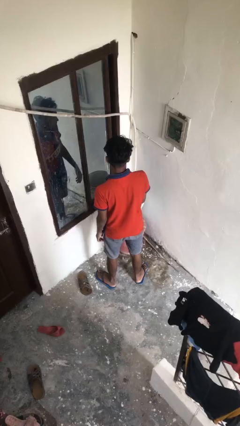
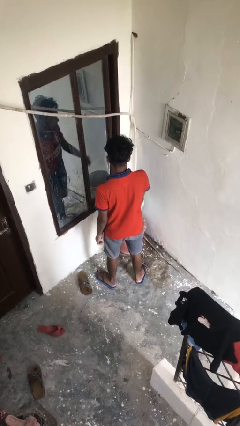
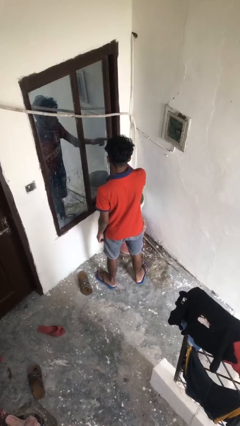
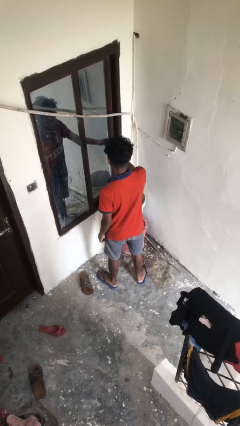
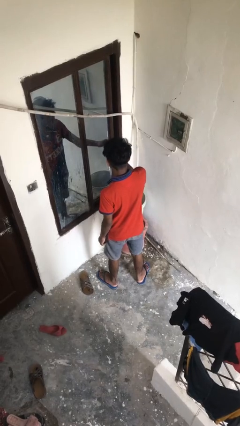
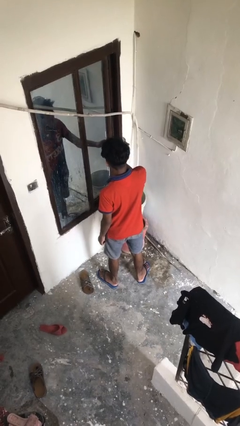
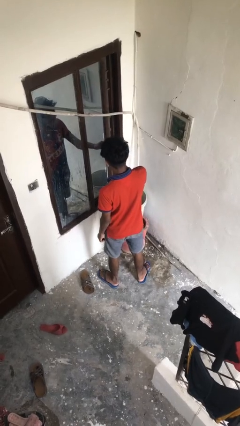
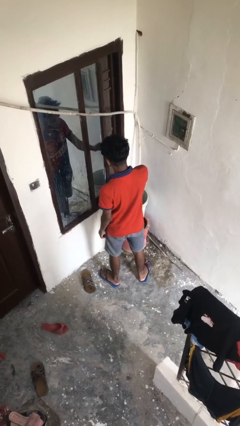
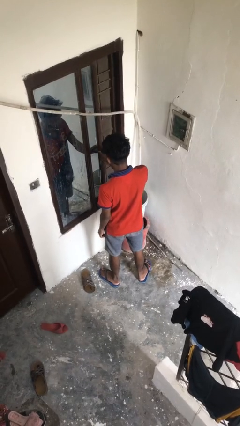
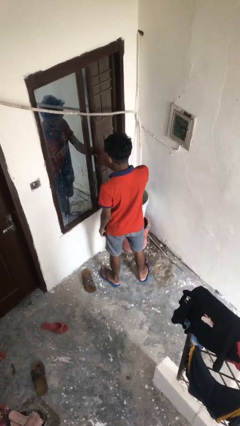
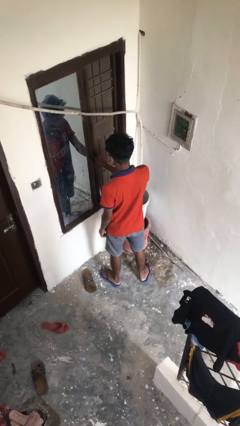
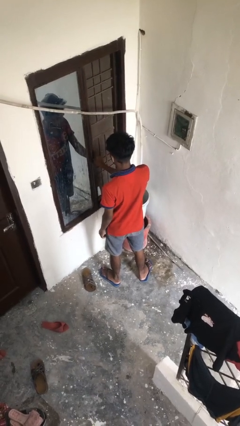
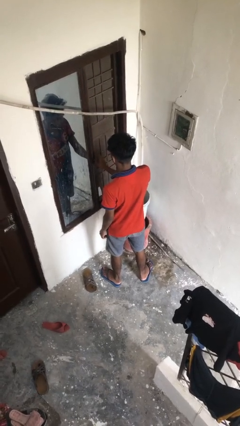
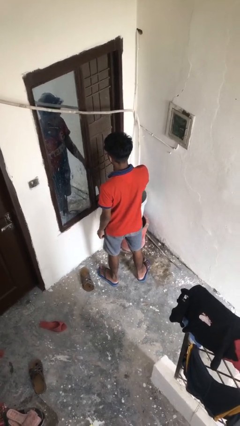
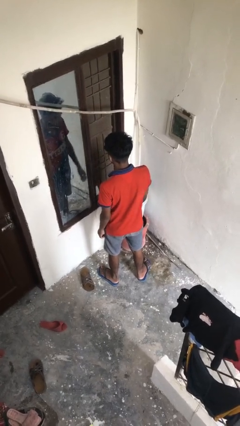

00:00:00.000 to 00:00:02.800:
person opens home window

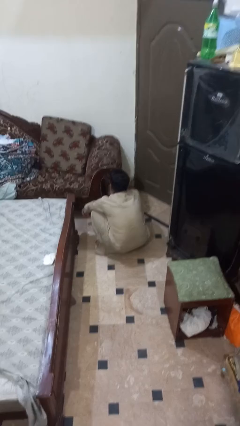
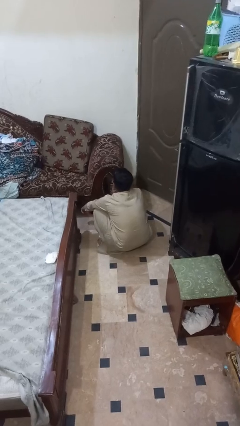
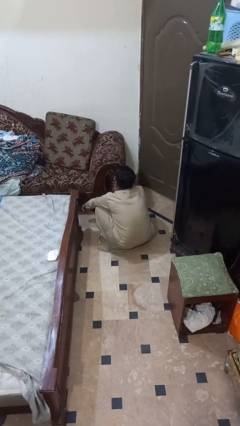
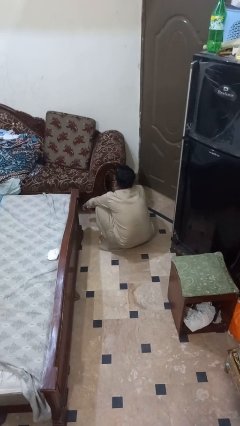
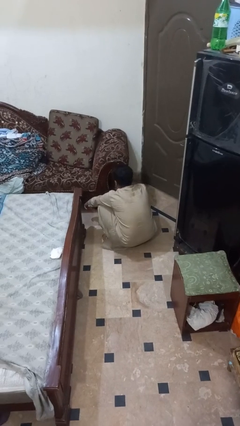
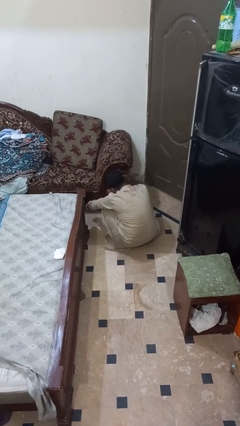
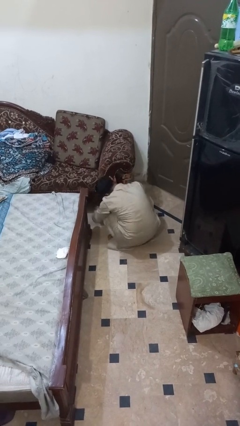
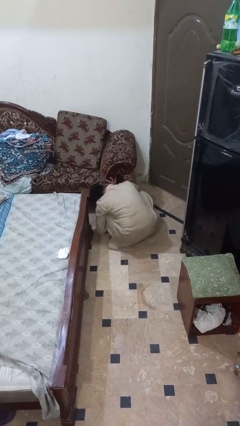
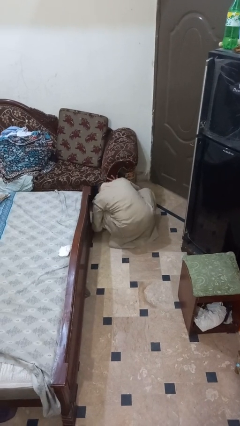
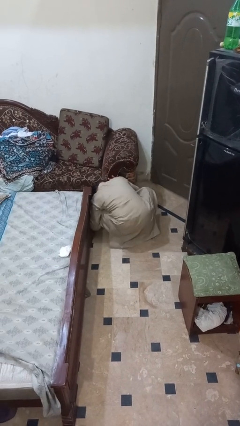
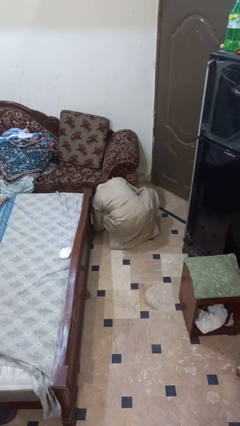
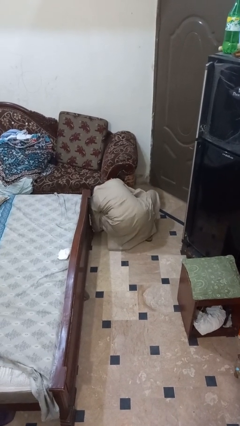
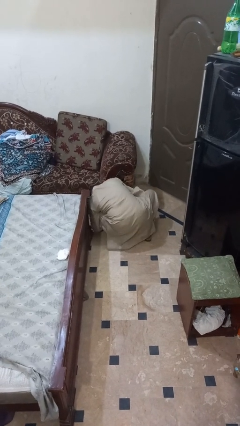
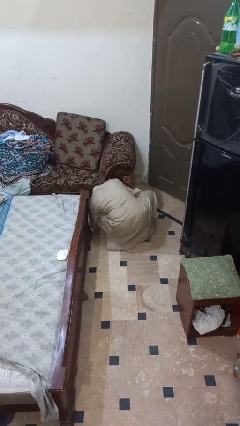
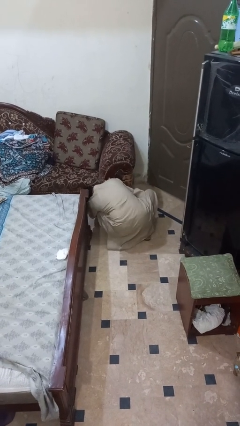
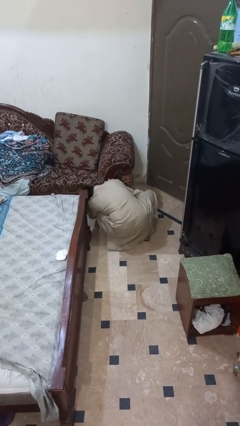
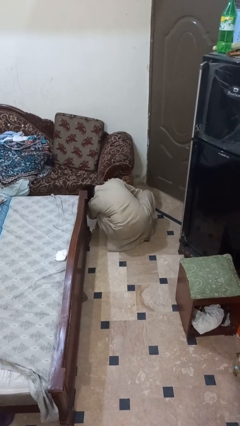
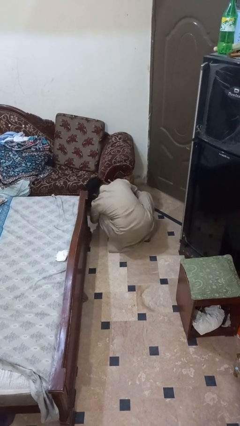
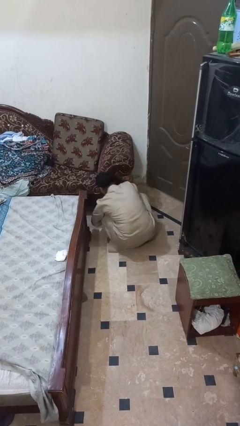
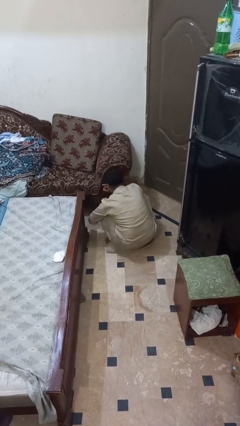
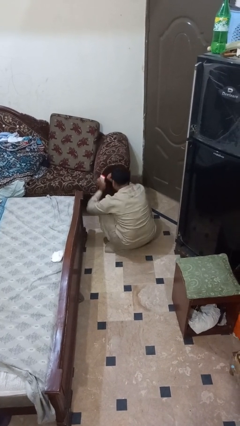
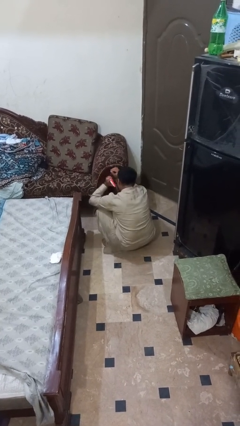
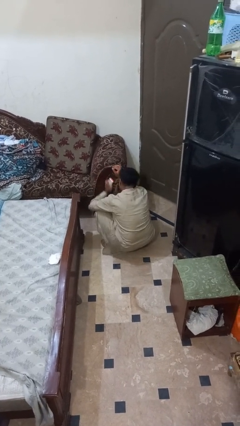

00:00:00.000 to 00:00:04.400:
person searches under couch

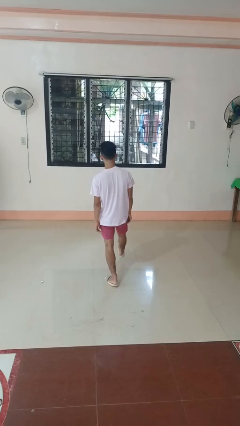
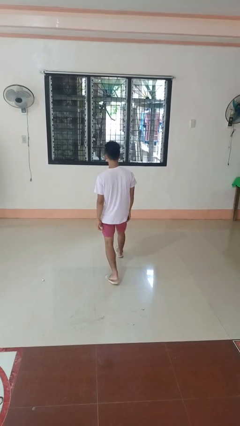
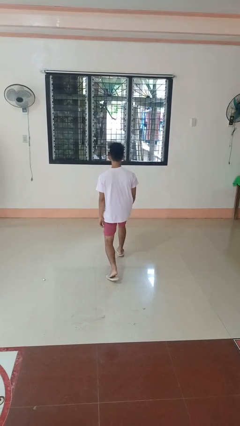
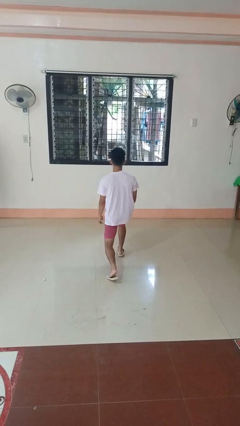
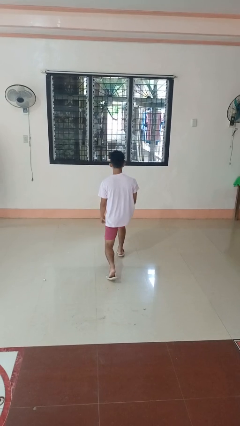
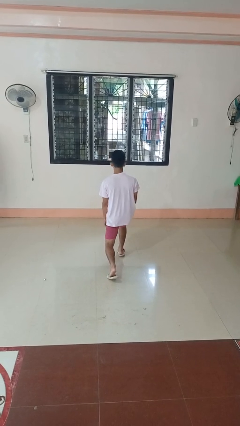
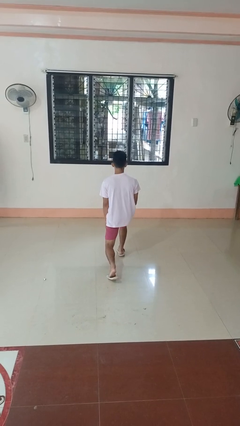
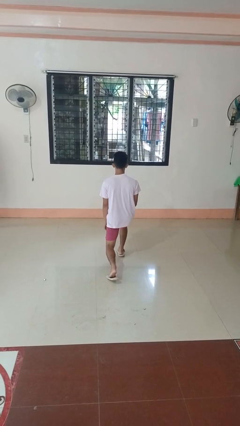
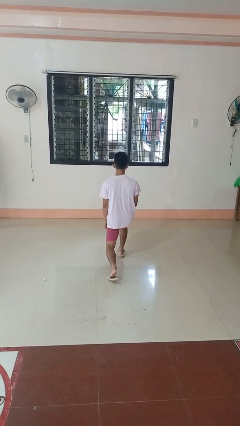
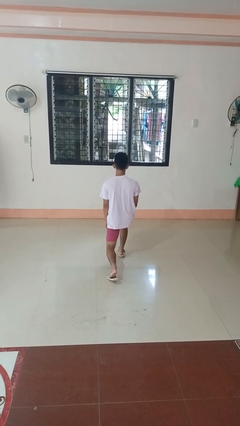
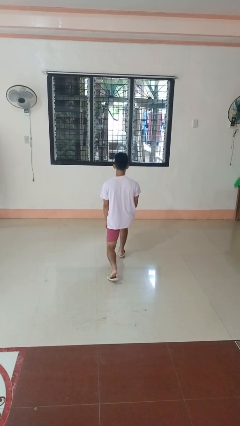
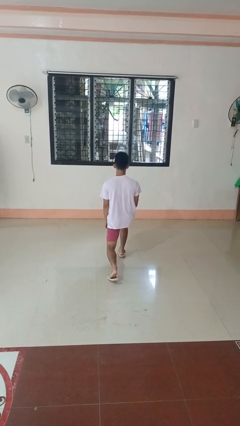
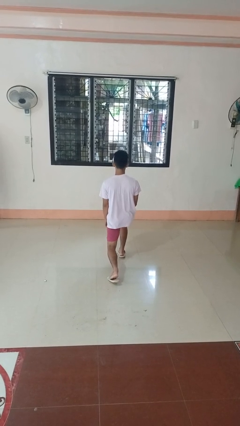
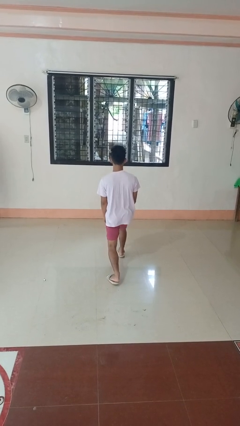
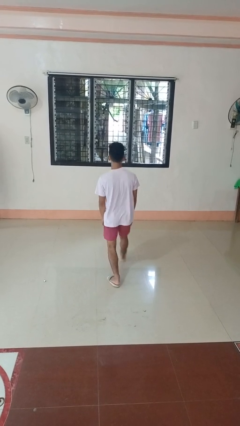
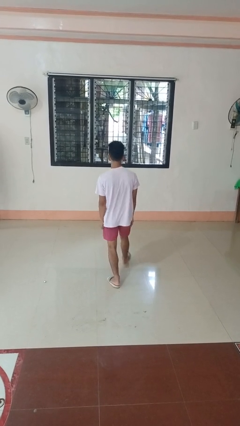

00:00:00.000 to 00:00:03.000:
person exercises with lunges

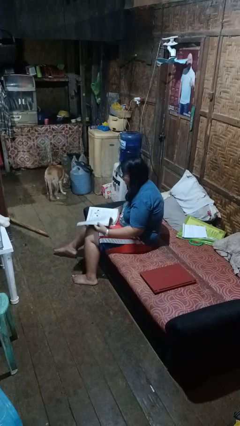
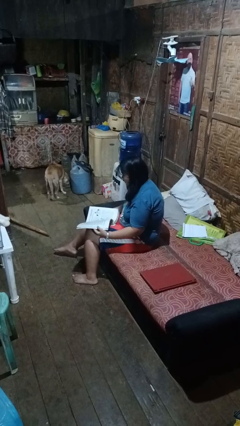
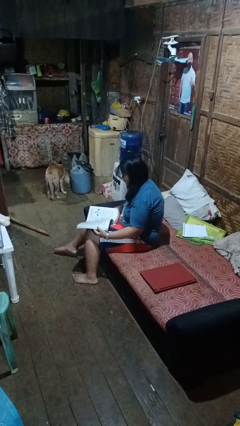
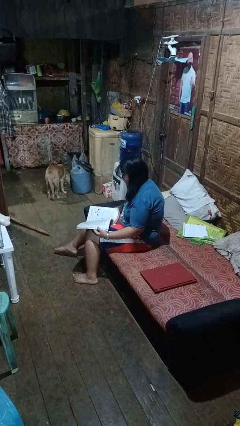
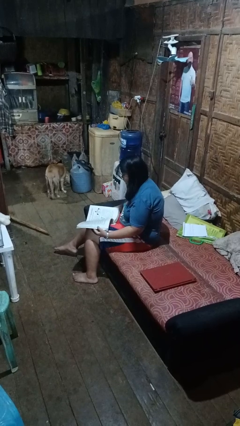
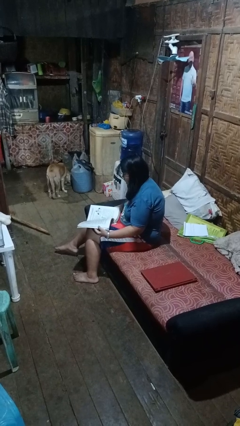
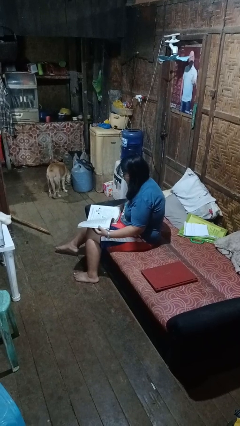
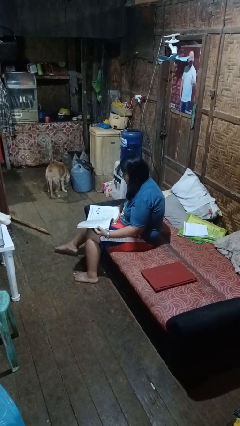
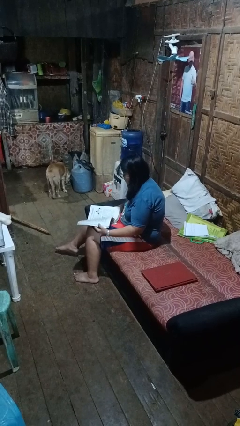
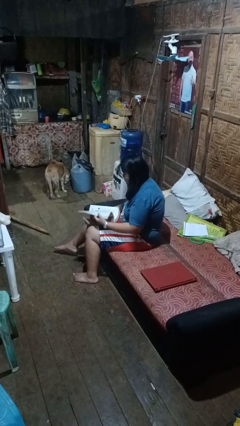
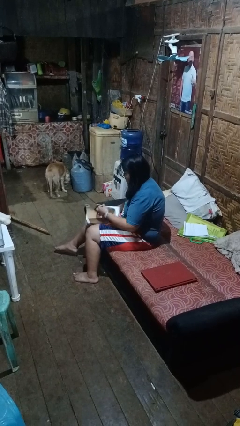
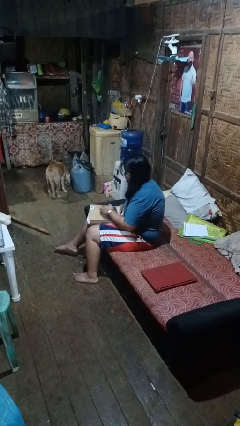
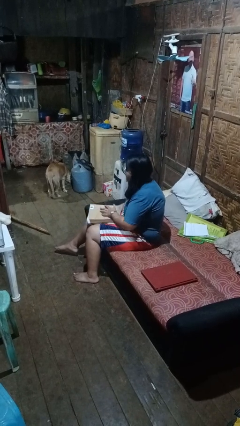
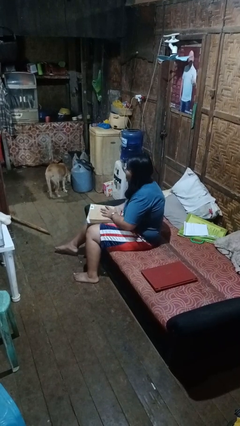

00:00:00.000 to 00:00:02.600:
person reads book

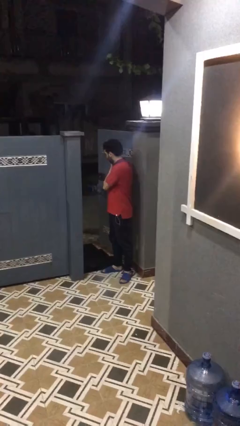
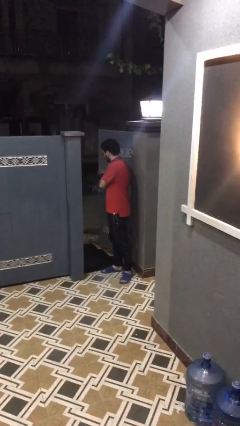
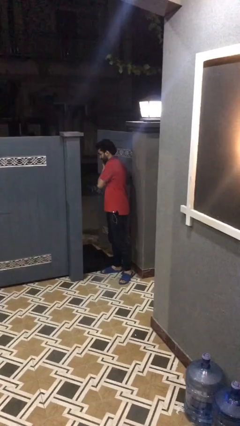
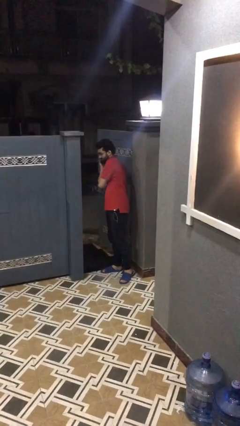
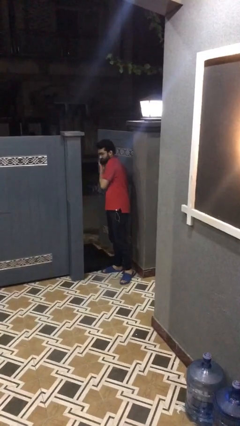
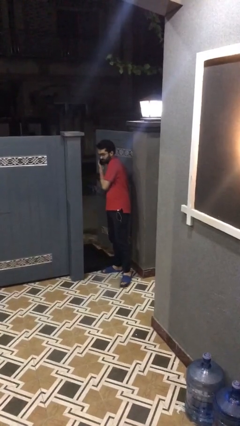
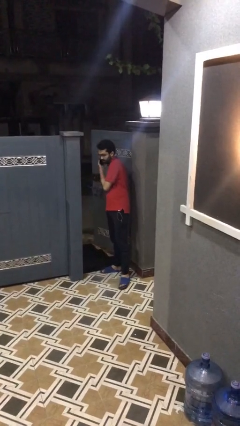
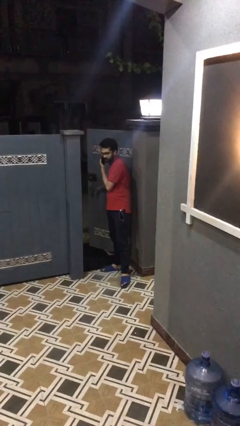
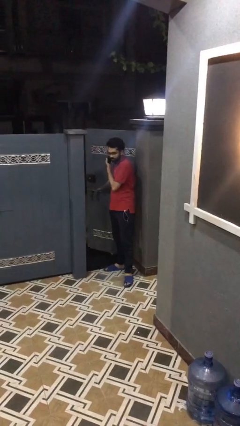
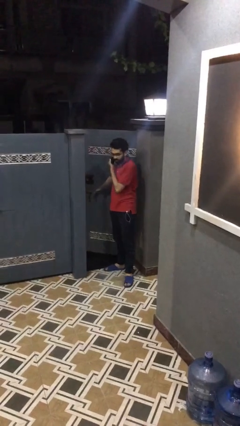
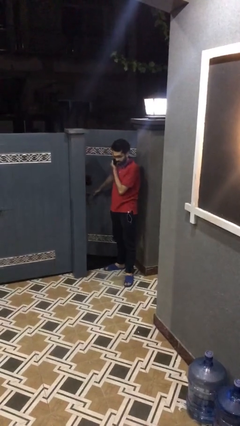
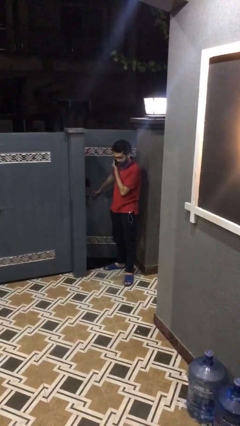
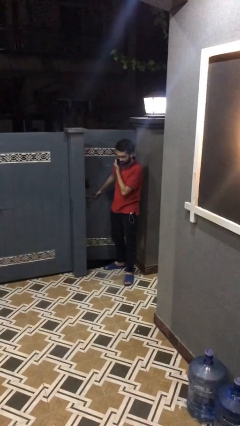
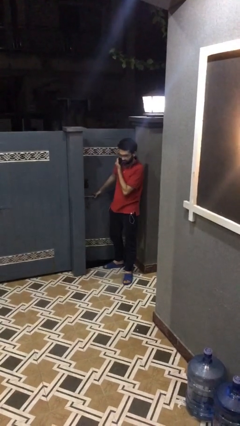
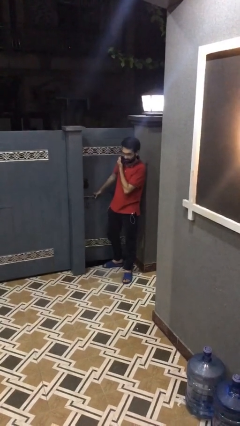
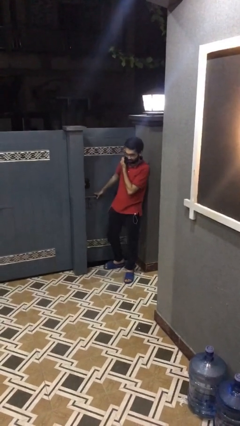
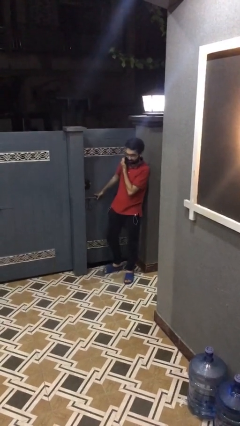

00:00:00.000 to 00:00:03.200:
person closes facility door

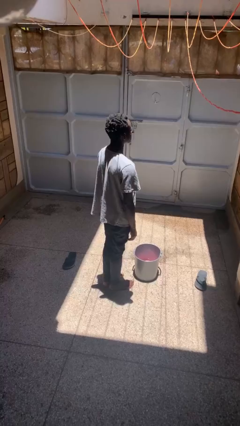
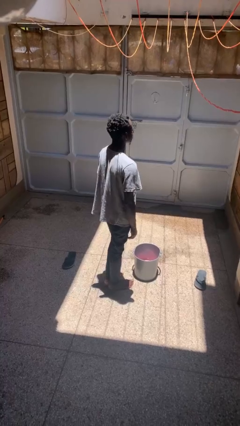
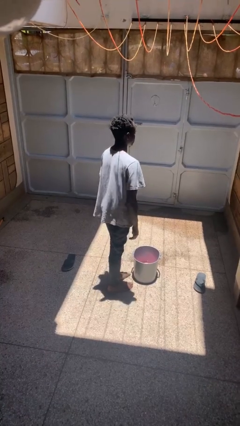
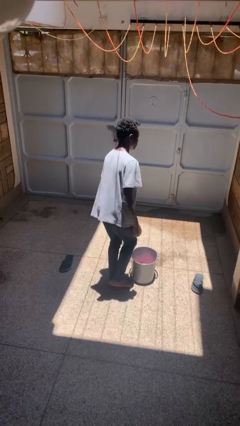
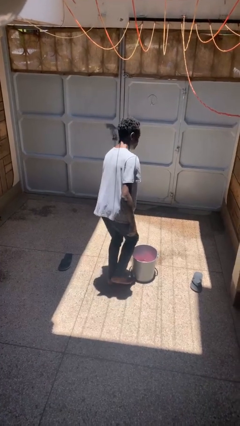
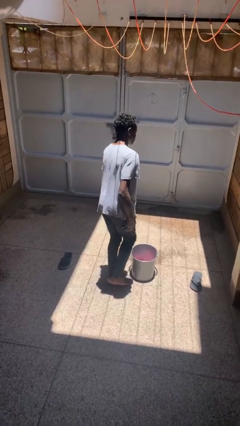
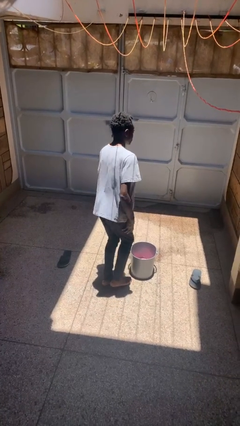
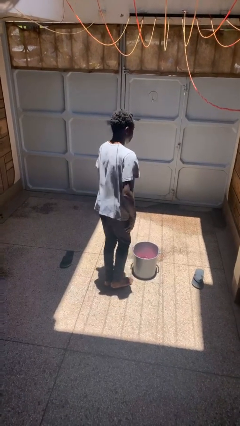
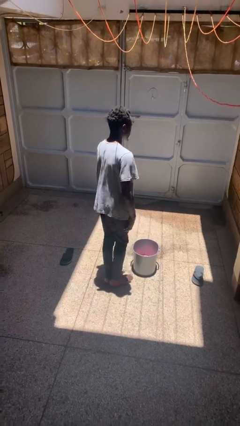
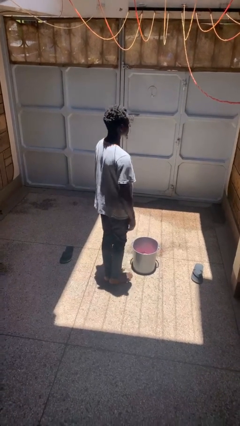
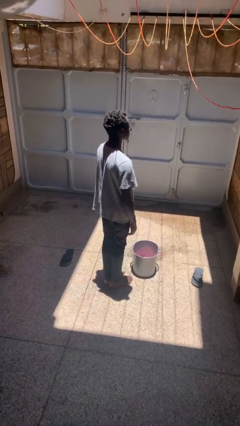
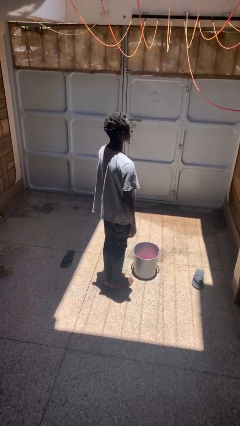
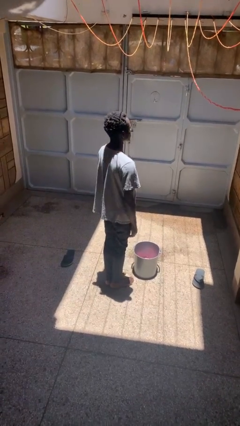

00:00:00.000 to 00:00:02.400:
person stubs toe
